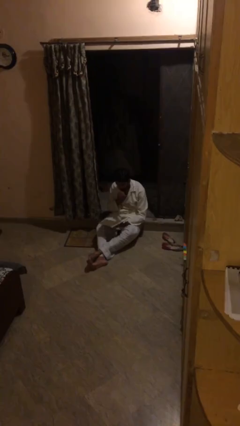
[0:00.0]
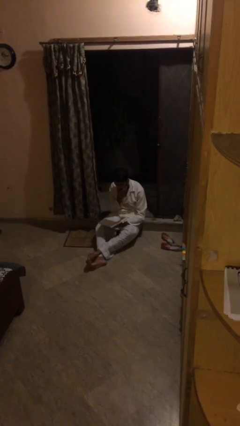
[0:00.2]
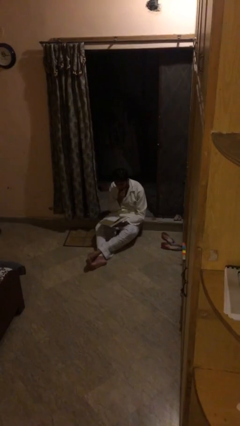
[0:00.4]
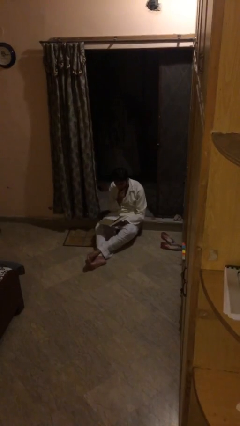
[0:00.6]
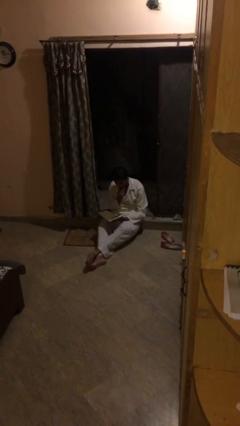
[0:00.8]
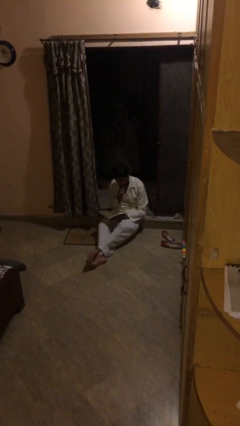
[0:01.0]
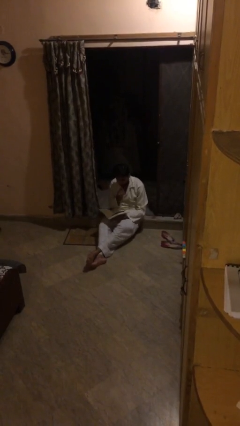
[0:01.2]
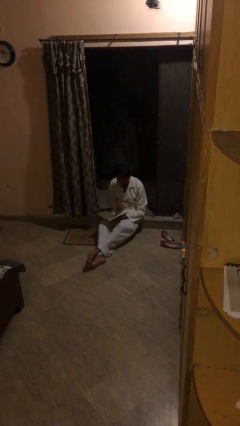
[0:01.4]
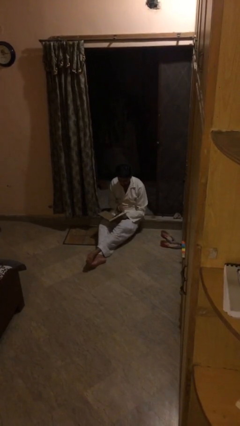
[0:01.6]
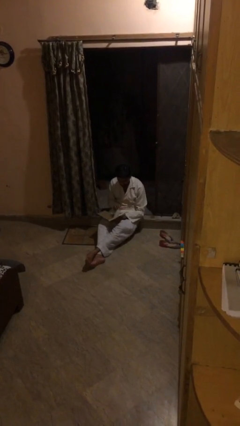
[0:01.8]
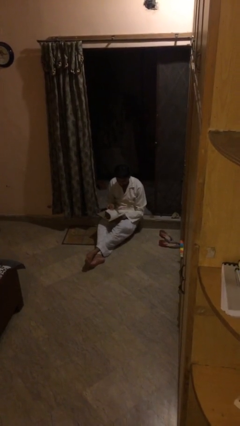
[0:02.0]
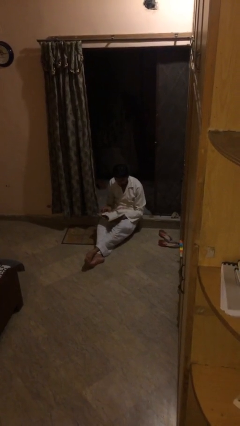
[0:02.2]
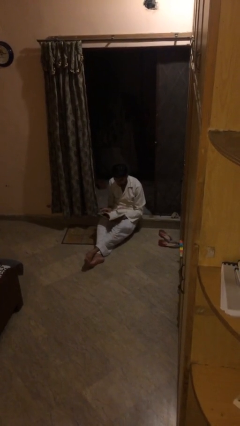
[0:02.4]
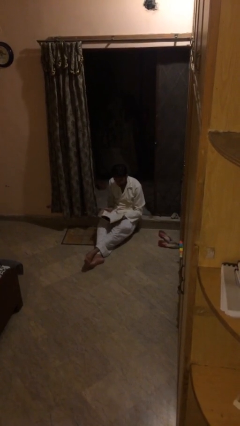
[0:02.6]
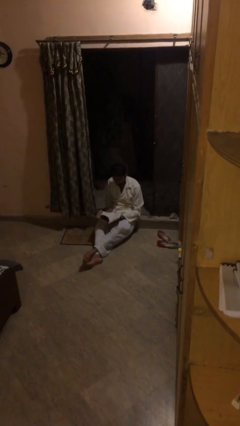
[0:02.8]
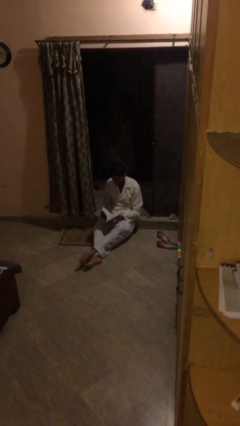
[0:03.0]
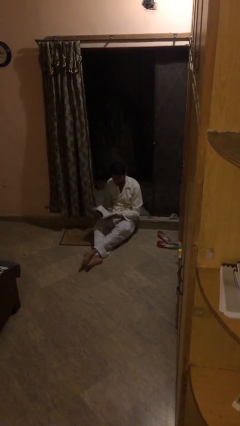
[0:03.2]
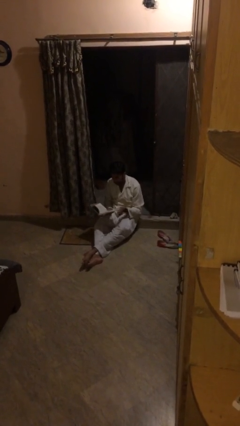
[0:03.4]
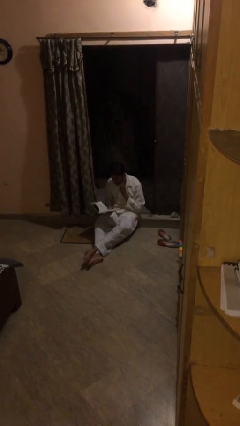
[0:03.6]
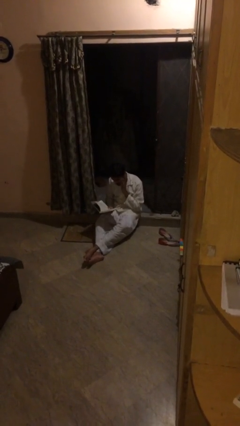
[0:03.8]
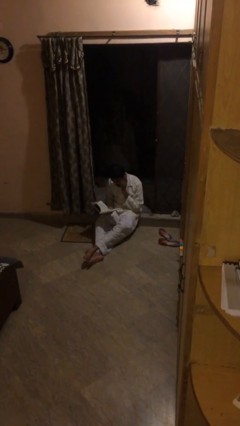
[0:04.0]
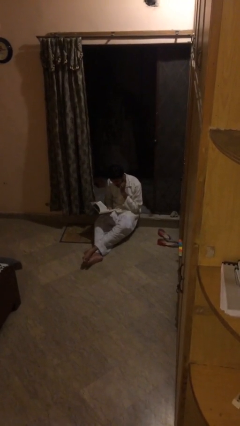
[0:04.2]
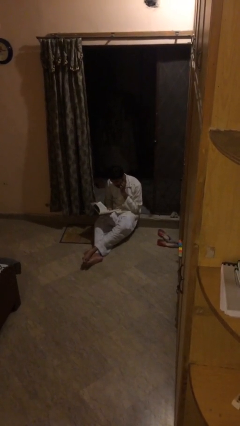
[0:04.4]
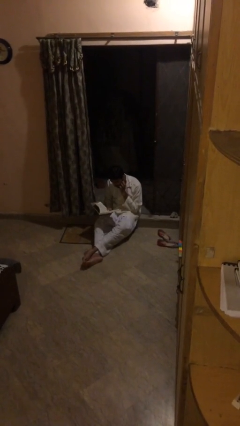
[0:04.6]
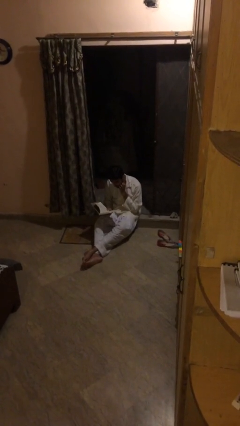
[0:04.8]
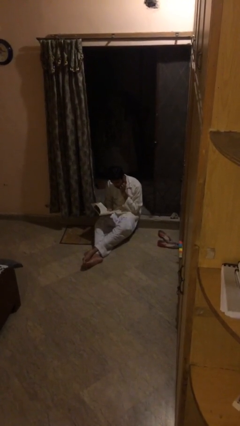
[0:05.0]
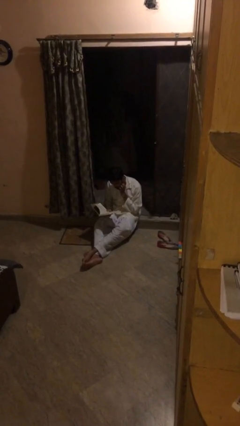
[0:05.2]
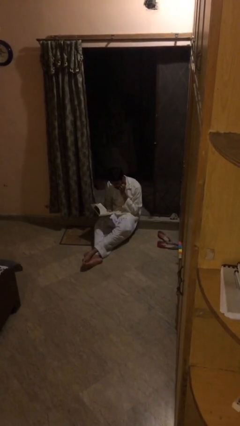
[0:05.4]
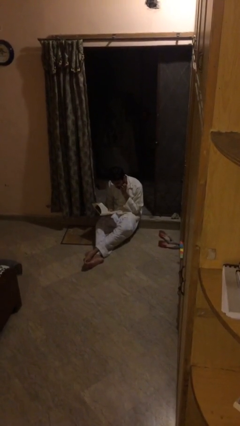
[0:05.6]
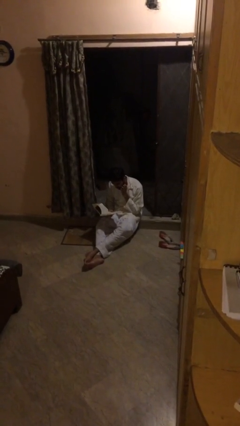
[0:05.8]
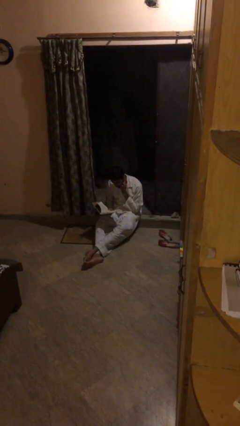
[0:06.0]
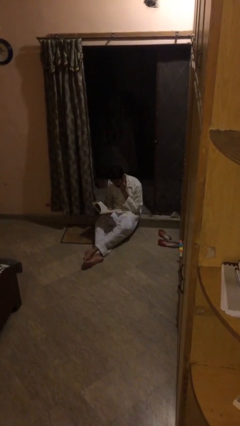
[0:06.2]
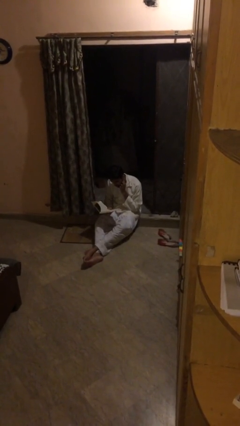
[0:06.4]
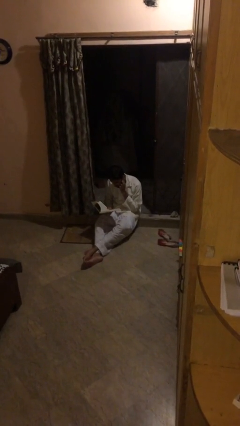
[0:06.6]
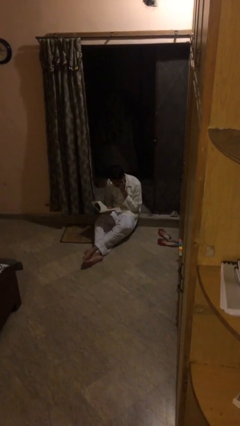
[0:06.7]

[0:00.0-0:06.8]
person reads document

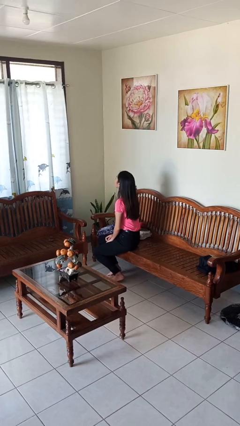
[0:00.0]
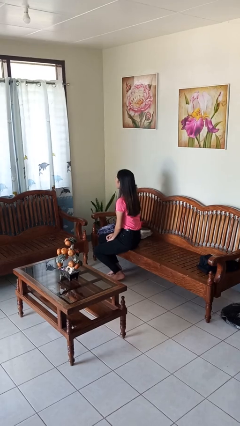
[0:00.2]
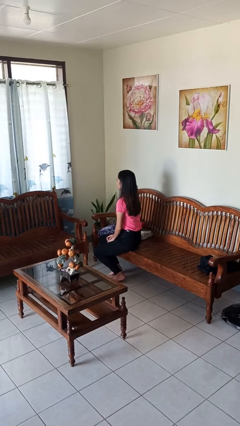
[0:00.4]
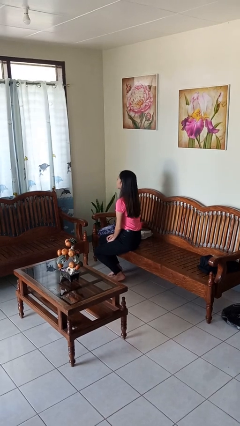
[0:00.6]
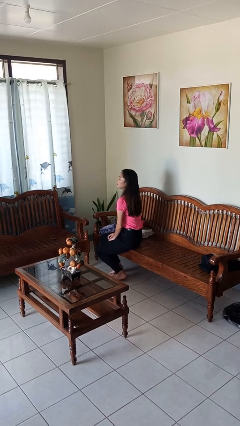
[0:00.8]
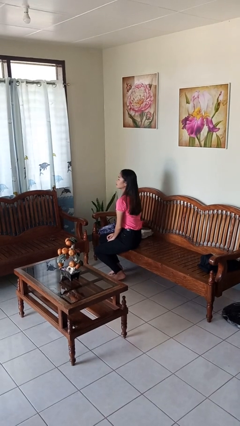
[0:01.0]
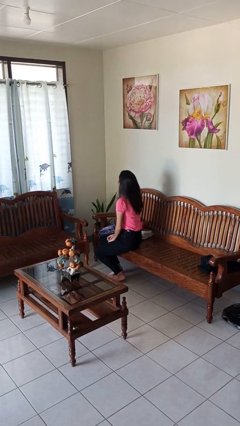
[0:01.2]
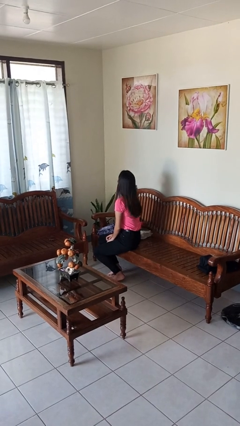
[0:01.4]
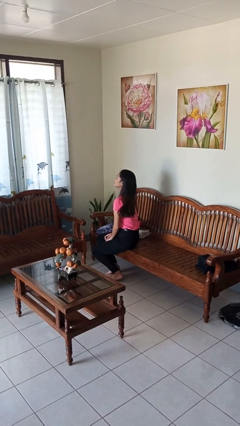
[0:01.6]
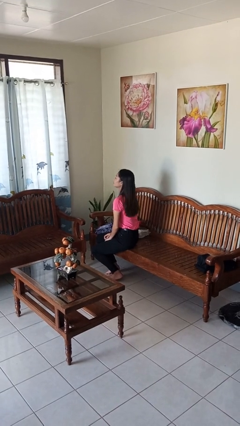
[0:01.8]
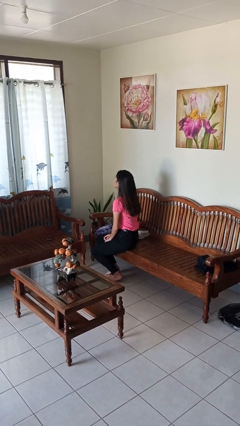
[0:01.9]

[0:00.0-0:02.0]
person shakes head

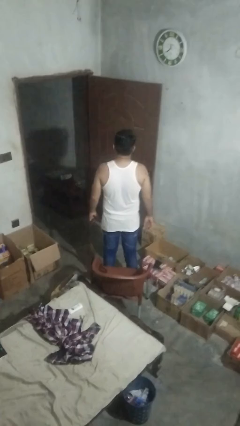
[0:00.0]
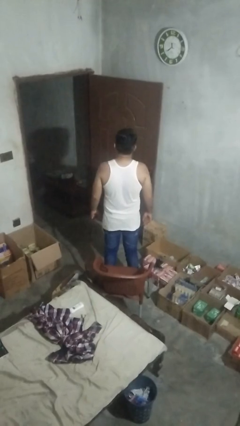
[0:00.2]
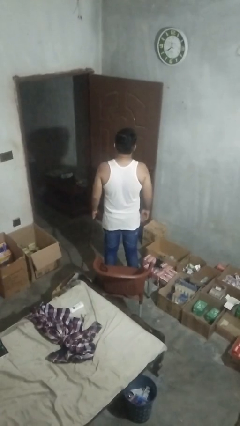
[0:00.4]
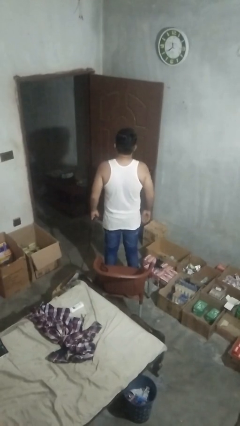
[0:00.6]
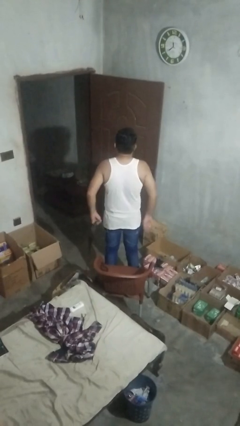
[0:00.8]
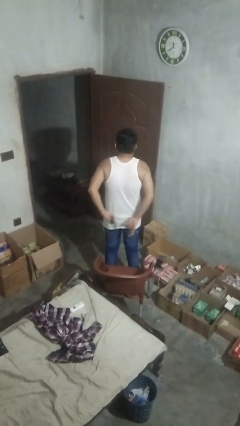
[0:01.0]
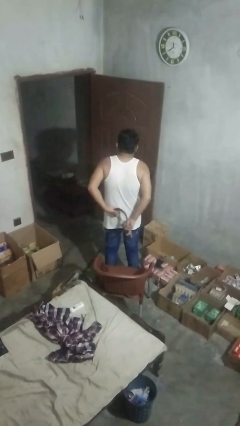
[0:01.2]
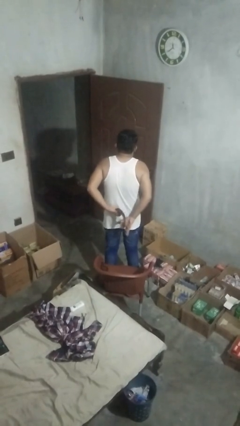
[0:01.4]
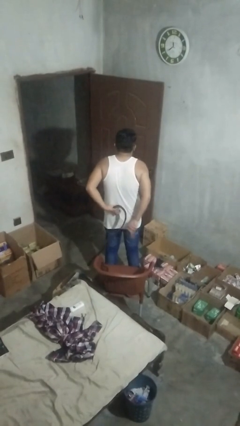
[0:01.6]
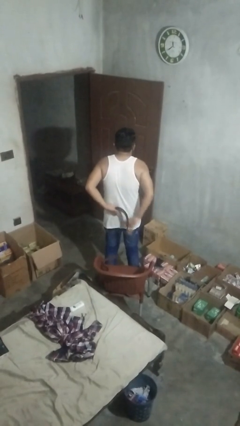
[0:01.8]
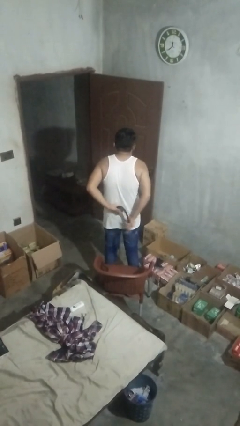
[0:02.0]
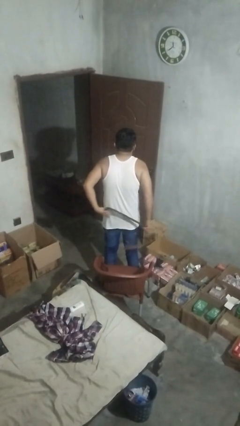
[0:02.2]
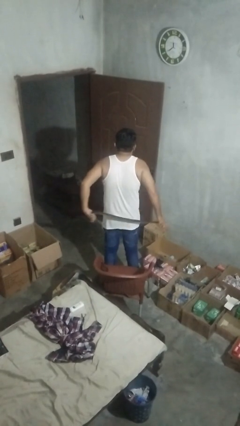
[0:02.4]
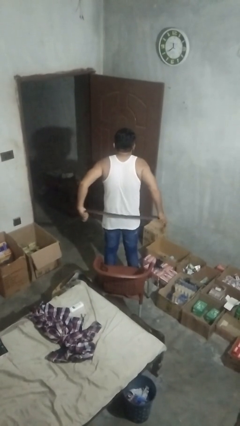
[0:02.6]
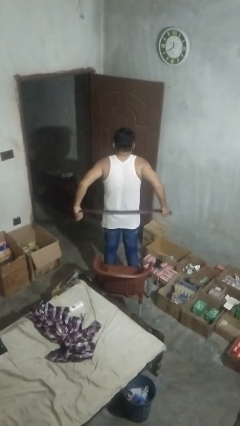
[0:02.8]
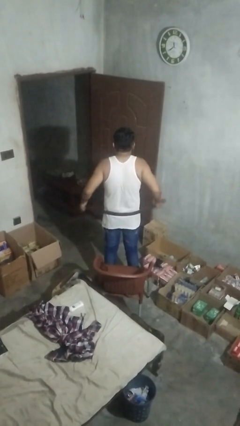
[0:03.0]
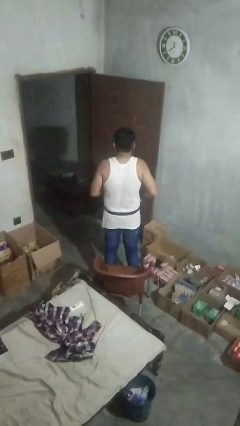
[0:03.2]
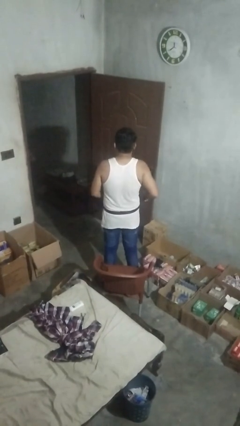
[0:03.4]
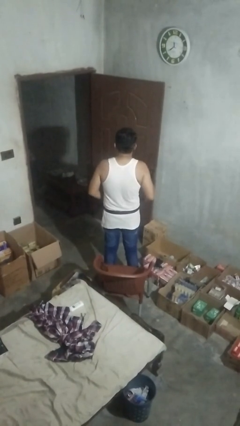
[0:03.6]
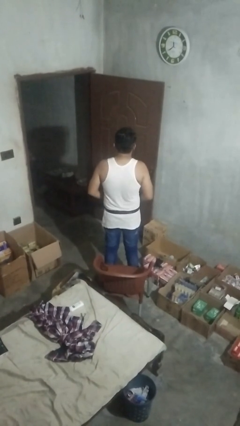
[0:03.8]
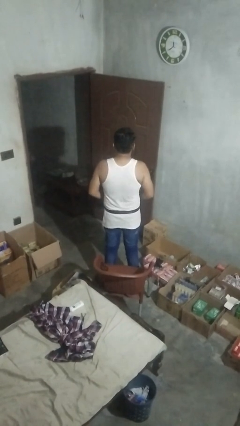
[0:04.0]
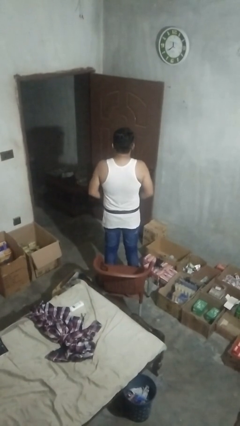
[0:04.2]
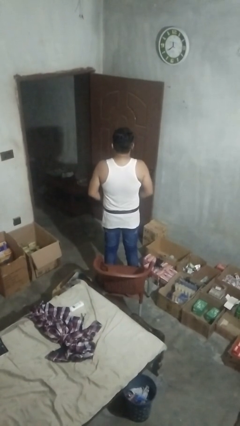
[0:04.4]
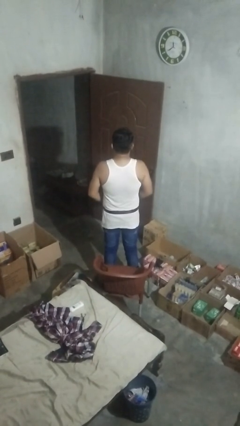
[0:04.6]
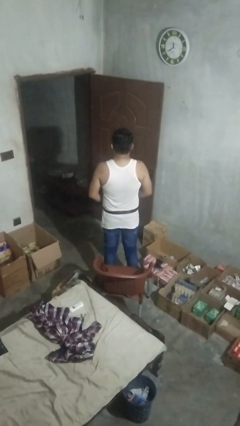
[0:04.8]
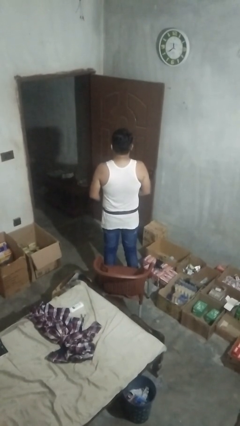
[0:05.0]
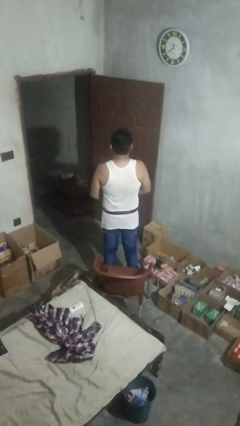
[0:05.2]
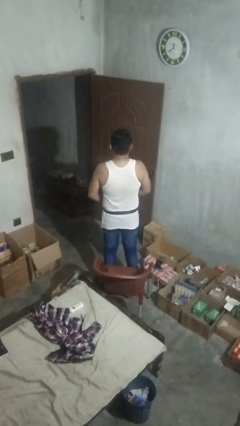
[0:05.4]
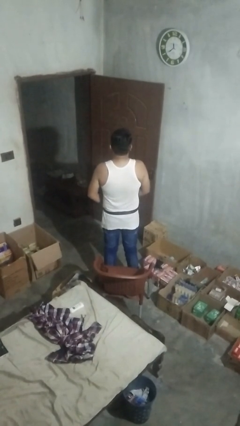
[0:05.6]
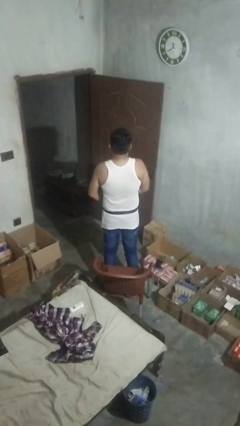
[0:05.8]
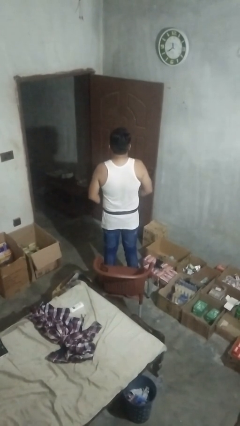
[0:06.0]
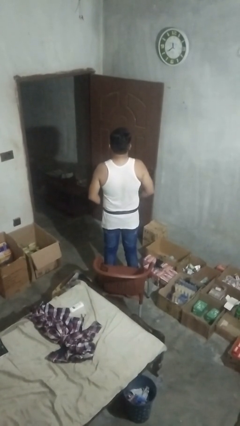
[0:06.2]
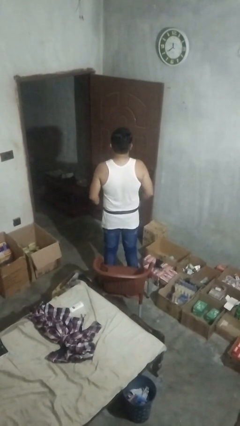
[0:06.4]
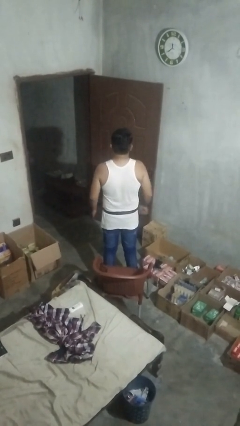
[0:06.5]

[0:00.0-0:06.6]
person puts on belt

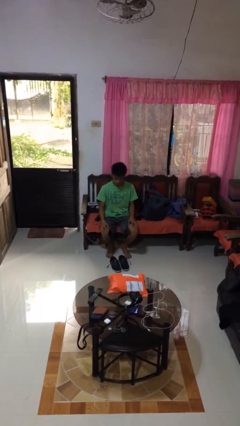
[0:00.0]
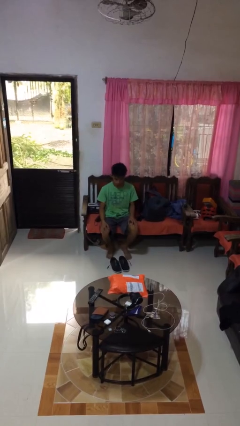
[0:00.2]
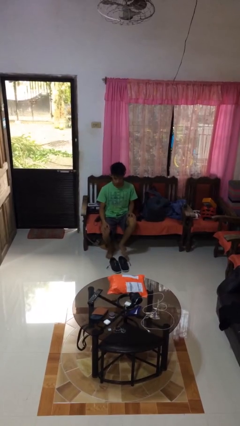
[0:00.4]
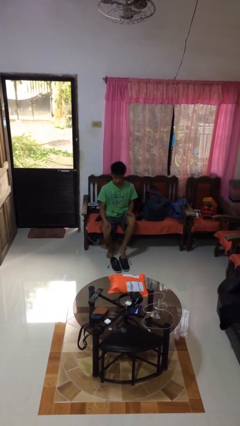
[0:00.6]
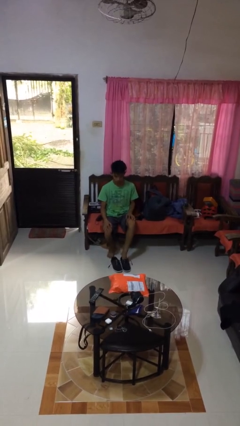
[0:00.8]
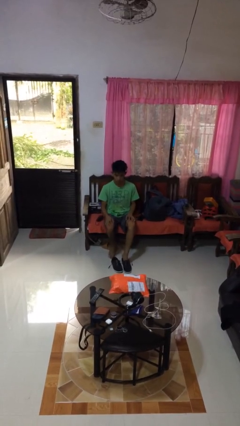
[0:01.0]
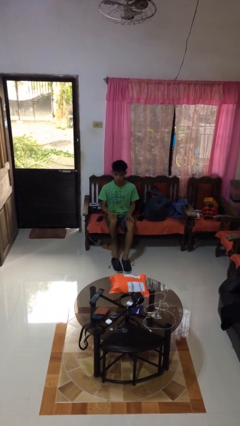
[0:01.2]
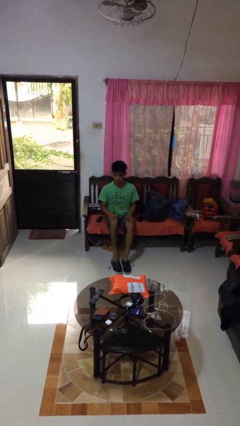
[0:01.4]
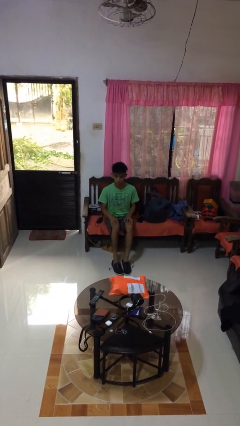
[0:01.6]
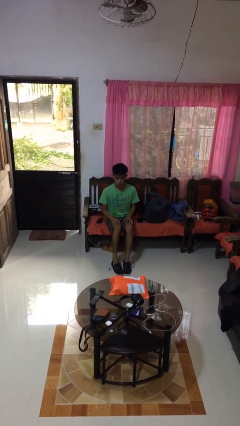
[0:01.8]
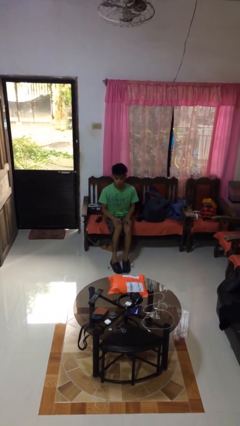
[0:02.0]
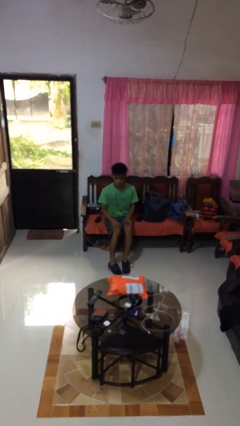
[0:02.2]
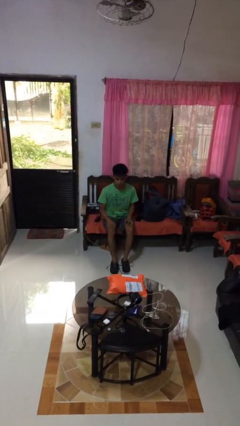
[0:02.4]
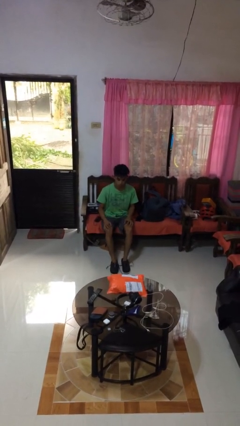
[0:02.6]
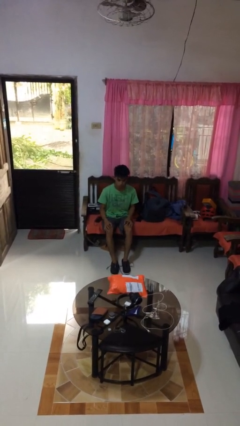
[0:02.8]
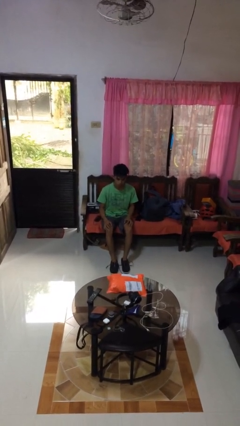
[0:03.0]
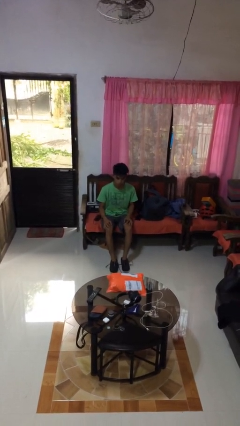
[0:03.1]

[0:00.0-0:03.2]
person puts on shoes
